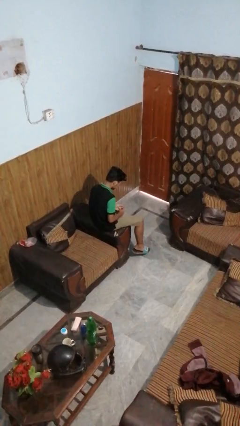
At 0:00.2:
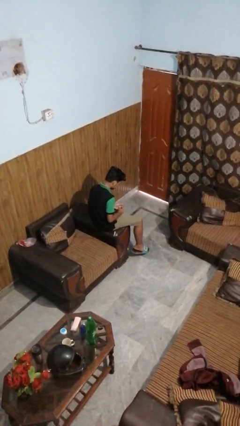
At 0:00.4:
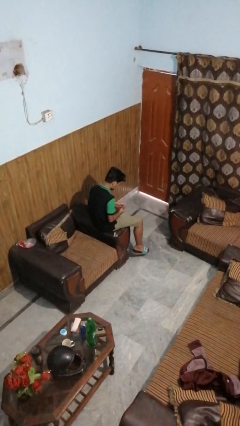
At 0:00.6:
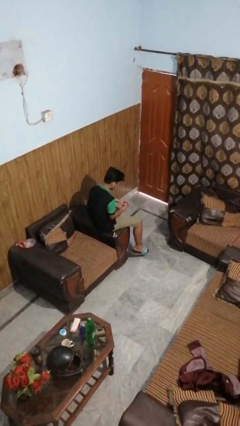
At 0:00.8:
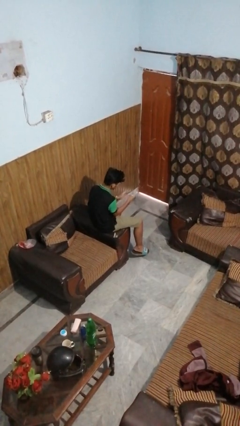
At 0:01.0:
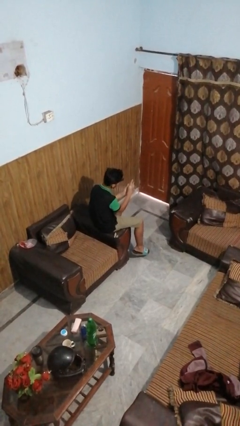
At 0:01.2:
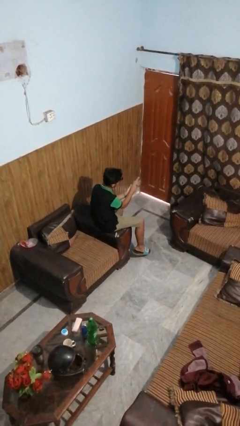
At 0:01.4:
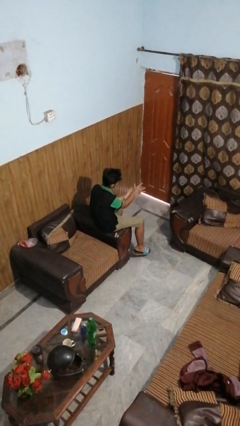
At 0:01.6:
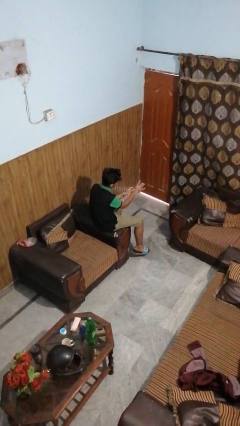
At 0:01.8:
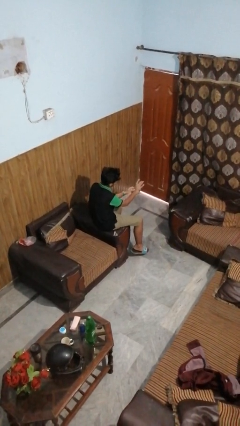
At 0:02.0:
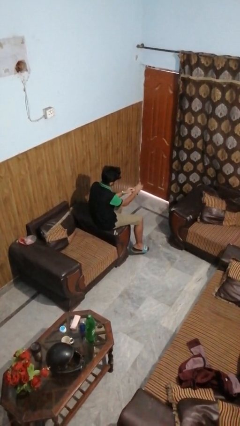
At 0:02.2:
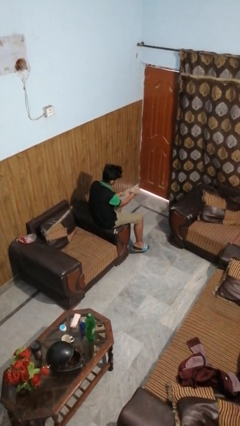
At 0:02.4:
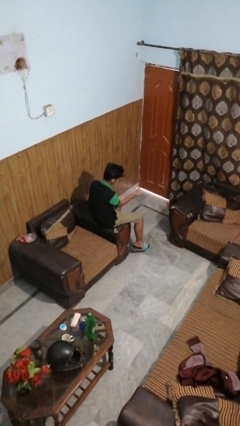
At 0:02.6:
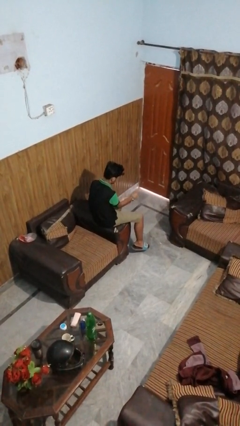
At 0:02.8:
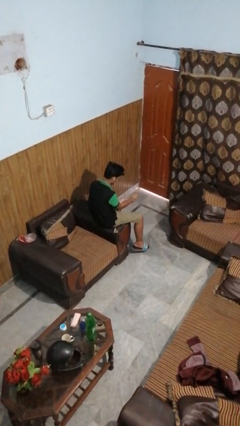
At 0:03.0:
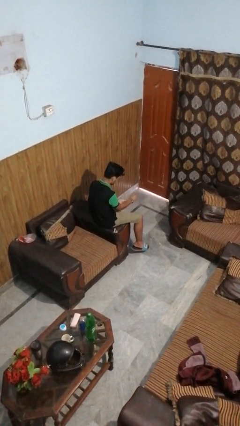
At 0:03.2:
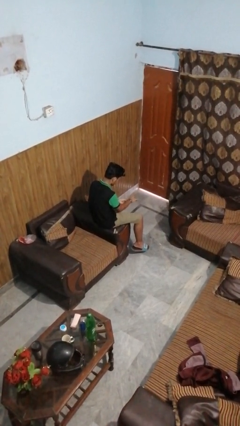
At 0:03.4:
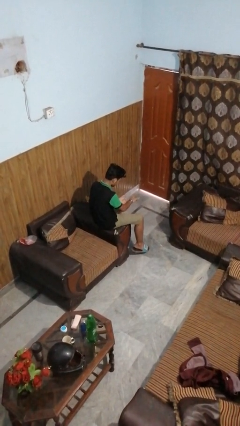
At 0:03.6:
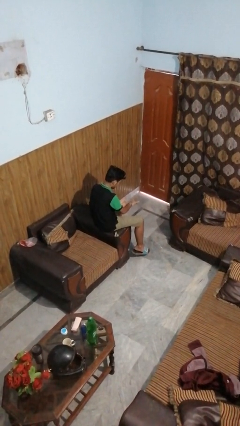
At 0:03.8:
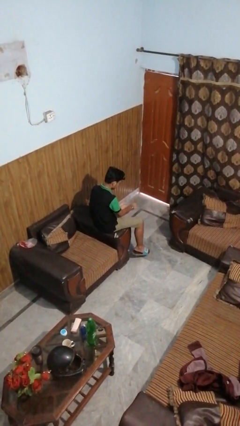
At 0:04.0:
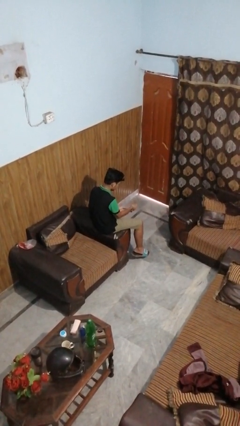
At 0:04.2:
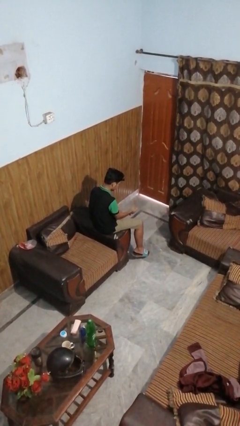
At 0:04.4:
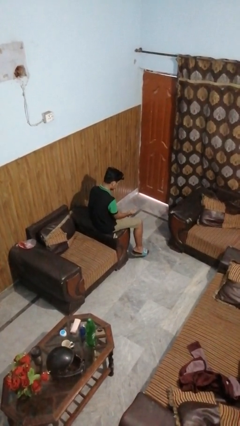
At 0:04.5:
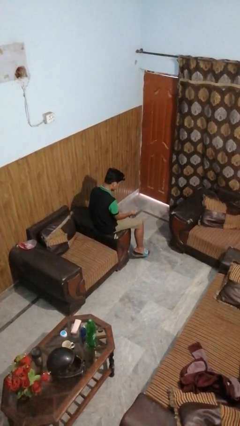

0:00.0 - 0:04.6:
person puts on wristwatch

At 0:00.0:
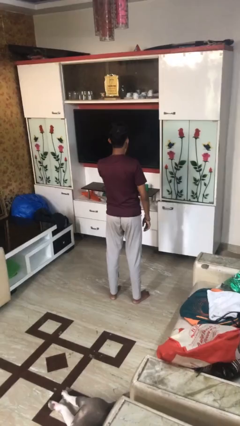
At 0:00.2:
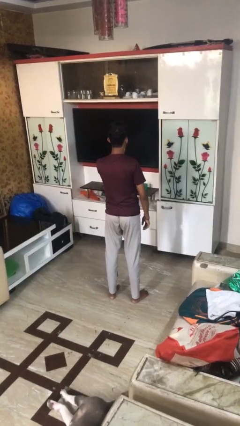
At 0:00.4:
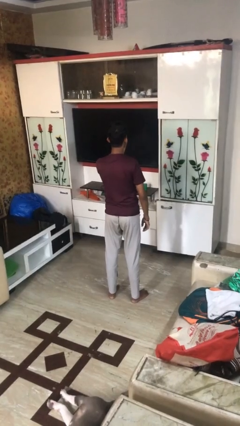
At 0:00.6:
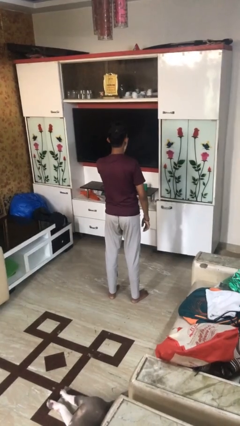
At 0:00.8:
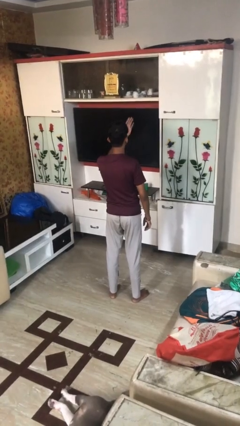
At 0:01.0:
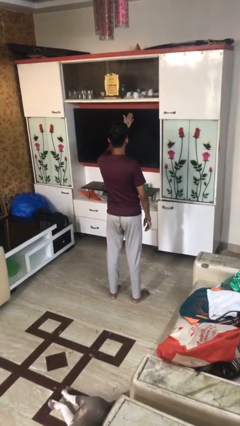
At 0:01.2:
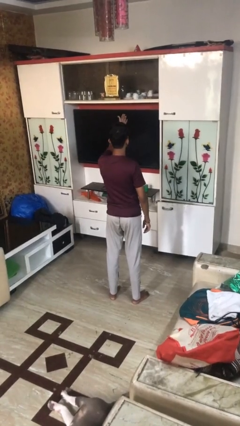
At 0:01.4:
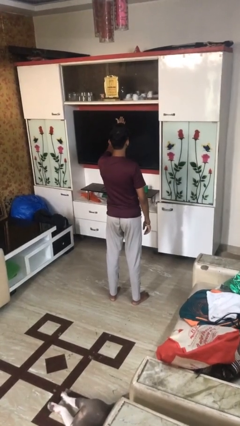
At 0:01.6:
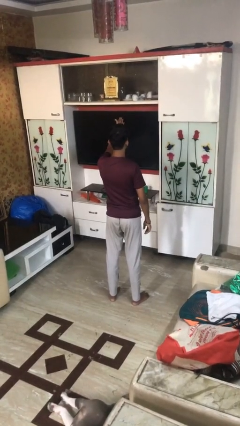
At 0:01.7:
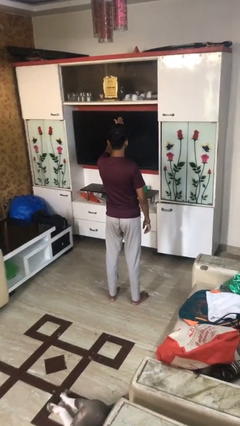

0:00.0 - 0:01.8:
person gestures blow kiss

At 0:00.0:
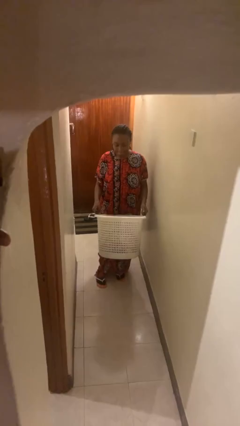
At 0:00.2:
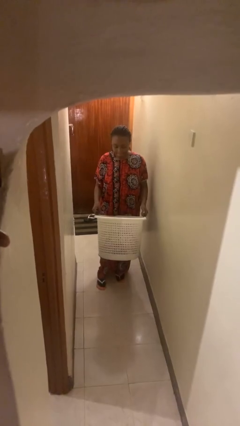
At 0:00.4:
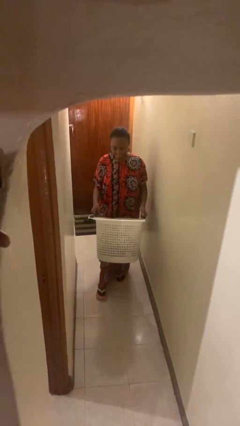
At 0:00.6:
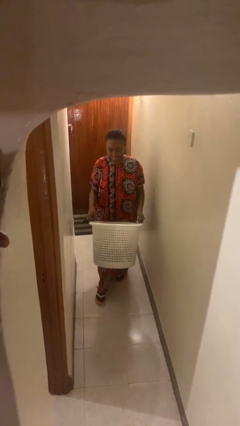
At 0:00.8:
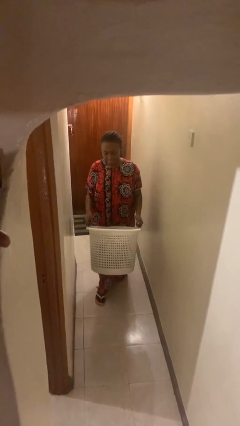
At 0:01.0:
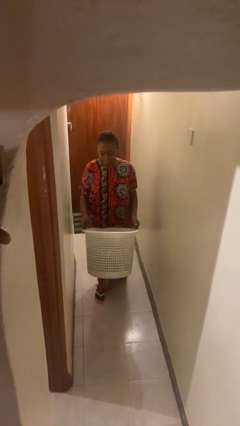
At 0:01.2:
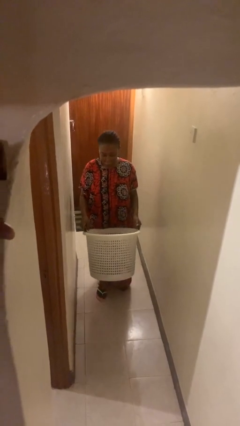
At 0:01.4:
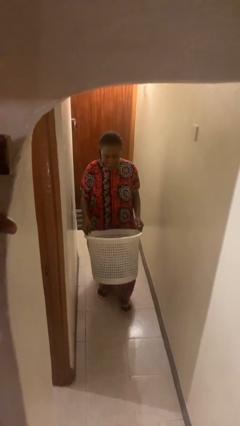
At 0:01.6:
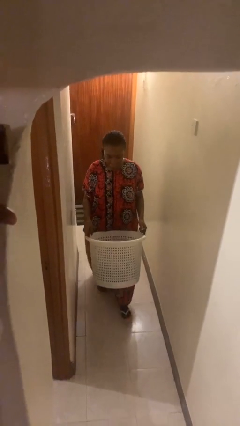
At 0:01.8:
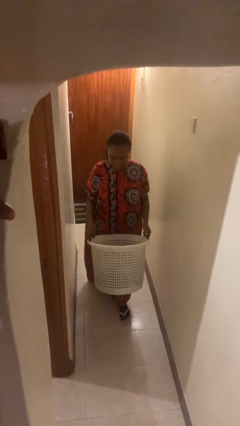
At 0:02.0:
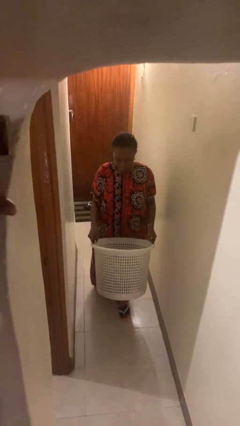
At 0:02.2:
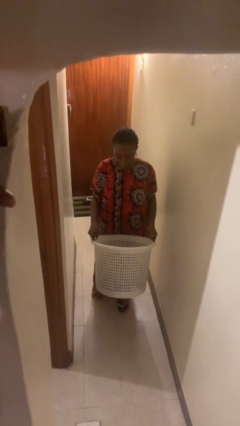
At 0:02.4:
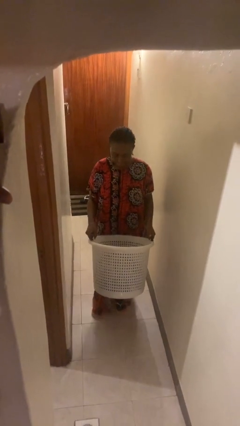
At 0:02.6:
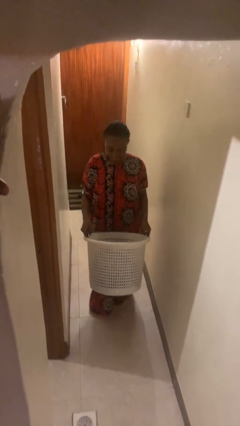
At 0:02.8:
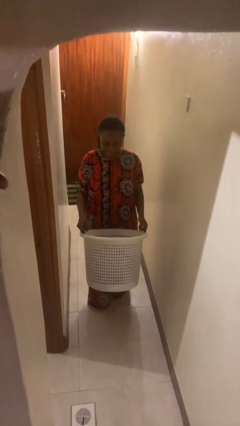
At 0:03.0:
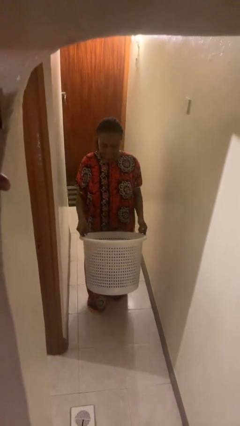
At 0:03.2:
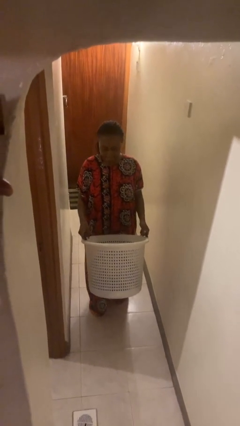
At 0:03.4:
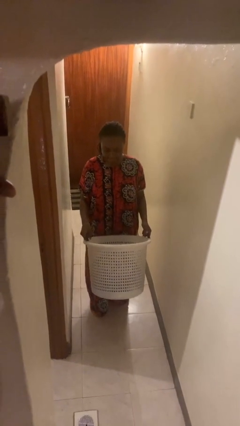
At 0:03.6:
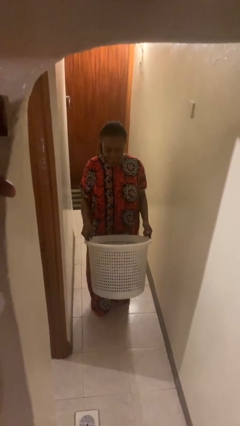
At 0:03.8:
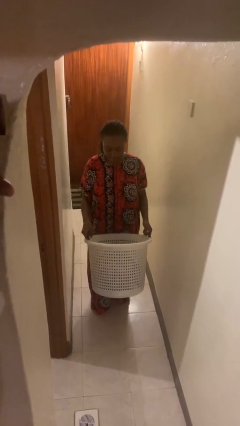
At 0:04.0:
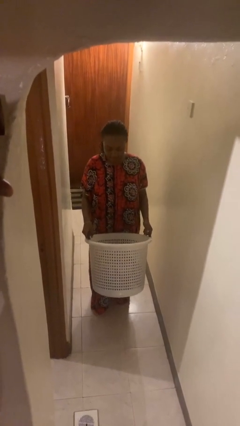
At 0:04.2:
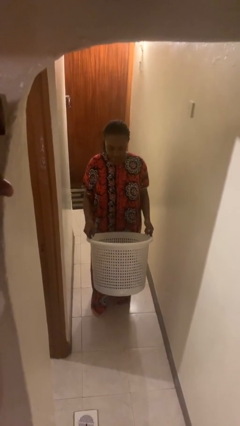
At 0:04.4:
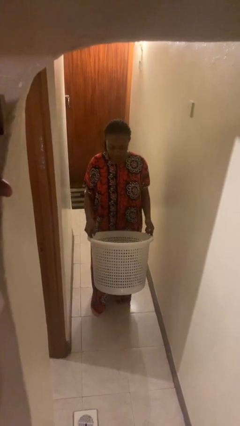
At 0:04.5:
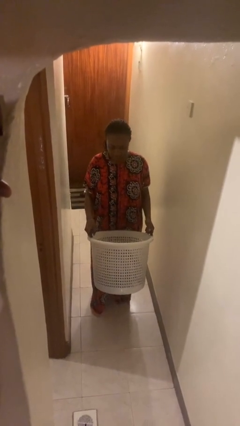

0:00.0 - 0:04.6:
person carries laundry basket

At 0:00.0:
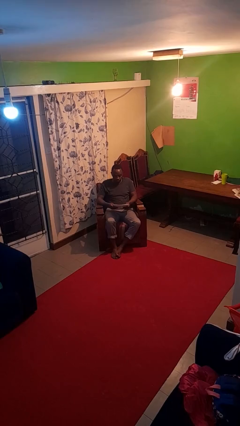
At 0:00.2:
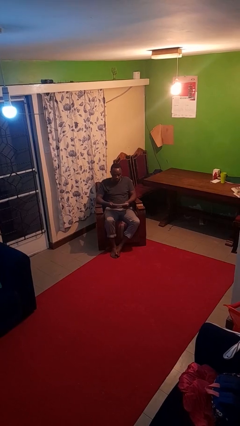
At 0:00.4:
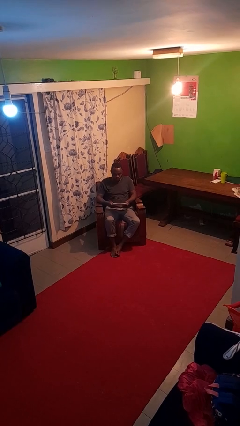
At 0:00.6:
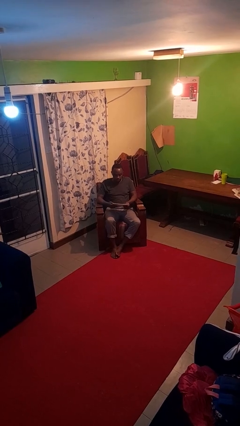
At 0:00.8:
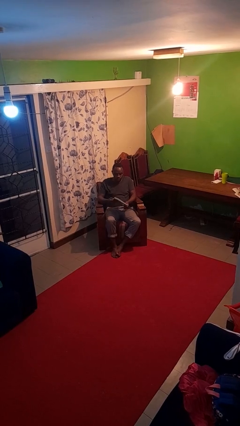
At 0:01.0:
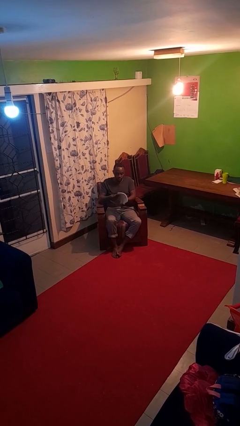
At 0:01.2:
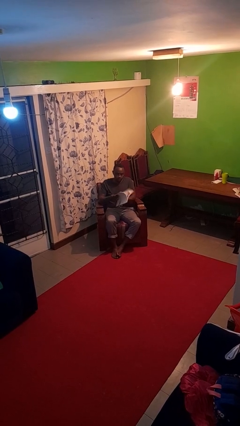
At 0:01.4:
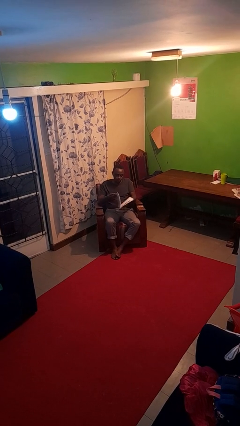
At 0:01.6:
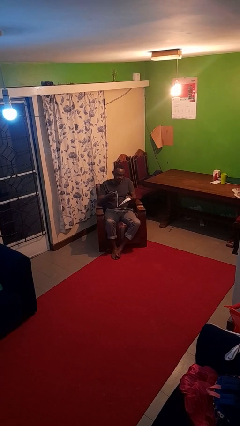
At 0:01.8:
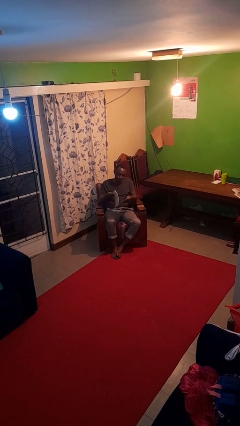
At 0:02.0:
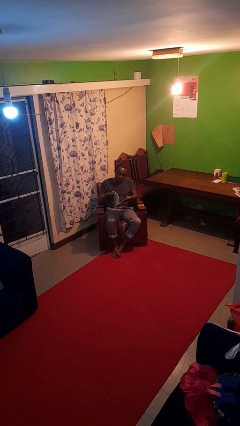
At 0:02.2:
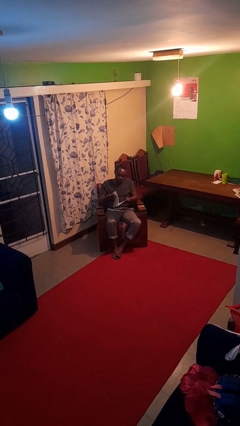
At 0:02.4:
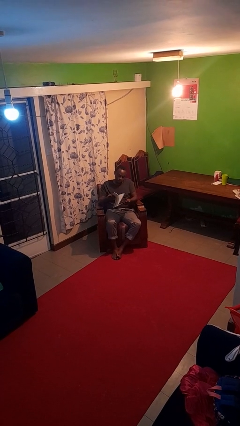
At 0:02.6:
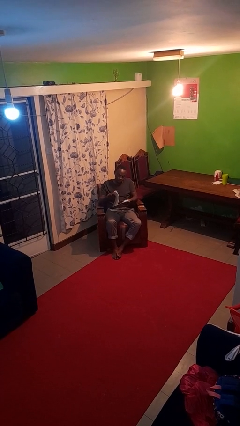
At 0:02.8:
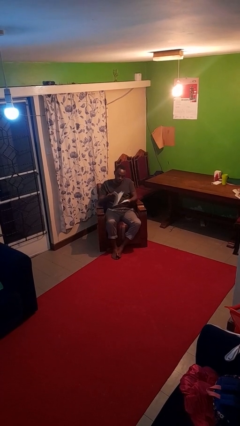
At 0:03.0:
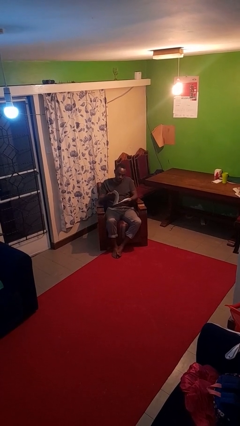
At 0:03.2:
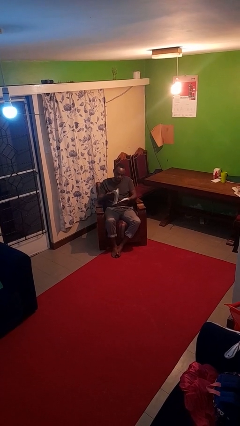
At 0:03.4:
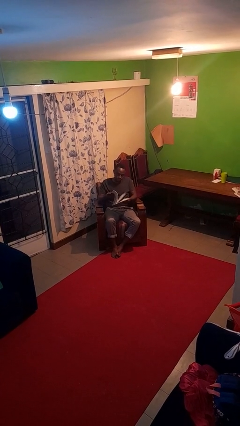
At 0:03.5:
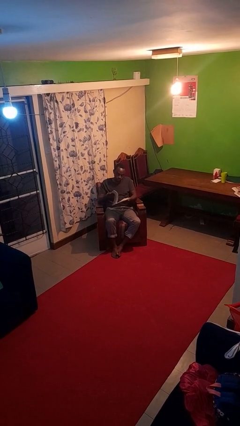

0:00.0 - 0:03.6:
person reads magazine

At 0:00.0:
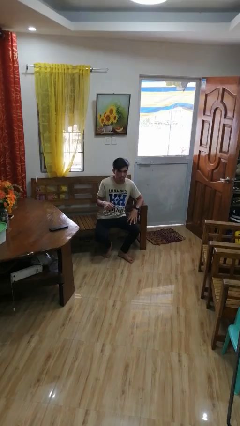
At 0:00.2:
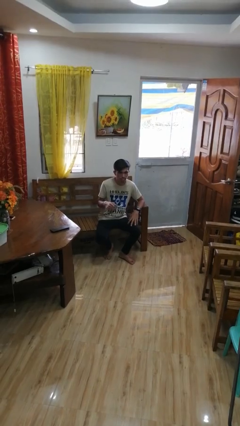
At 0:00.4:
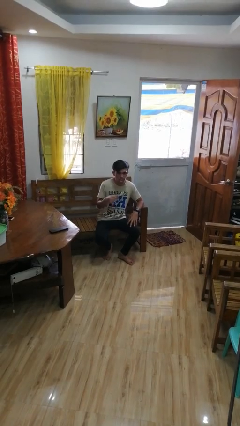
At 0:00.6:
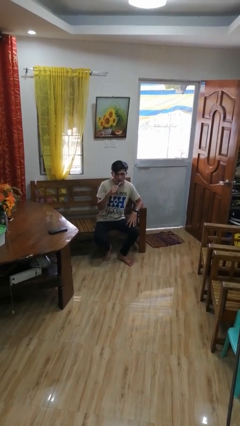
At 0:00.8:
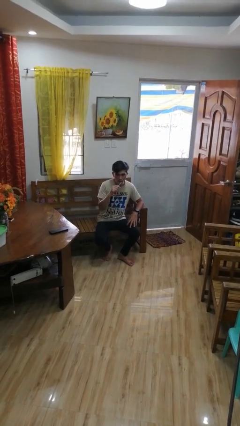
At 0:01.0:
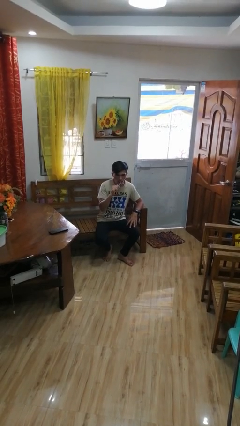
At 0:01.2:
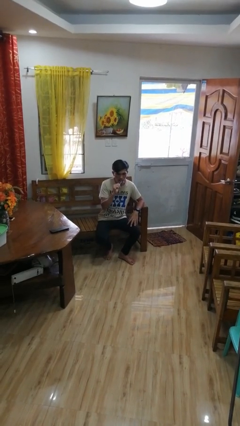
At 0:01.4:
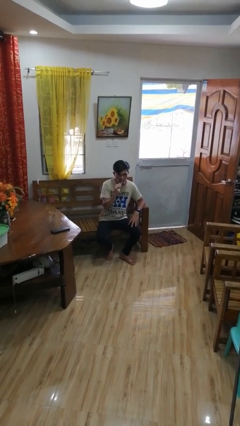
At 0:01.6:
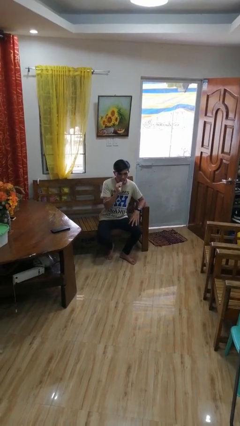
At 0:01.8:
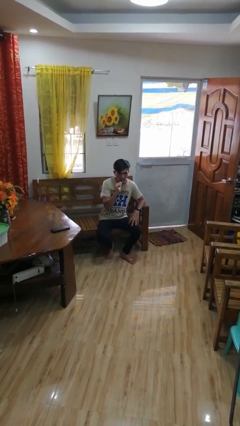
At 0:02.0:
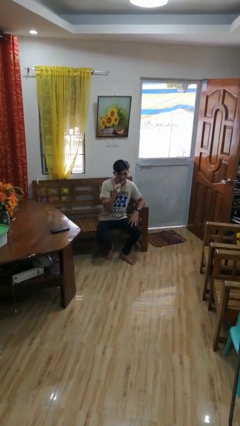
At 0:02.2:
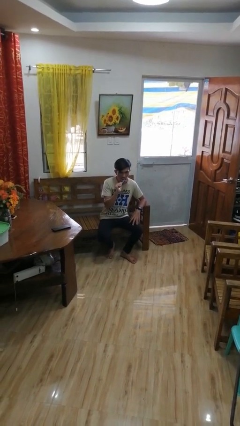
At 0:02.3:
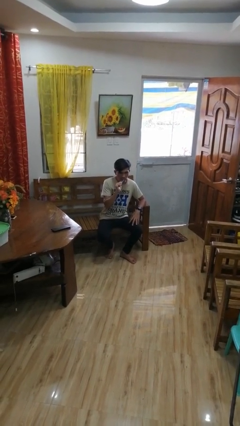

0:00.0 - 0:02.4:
person brushes teeth
